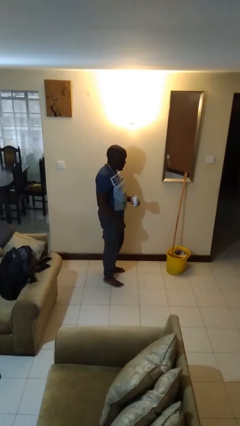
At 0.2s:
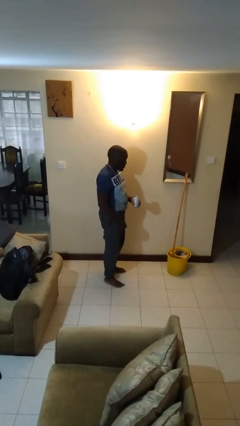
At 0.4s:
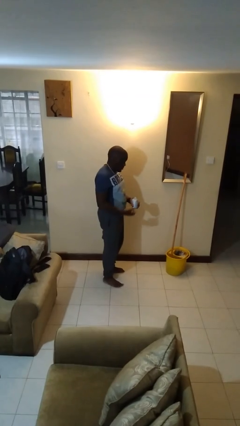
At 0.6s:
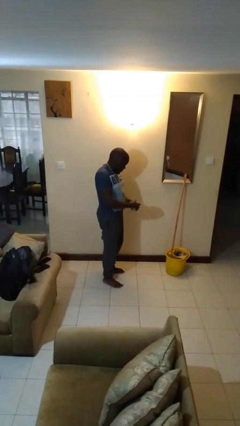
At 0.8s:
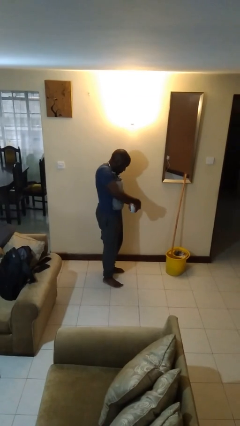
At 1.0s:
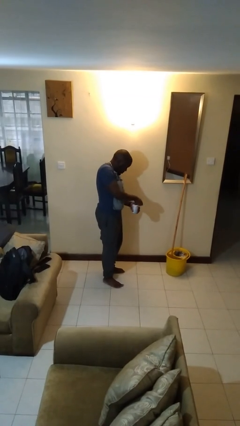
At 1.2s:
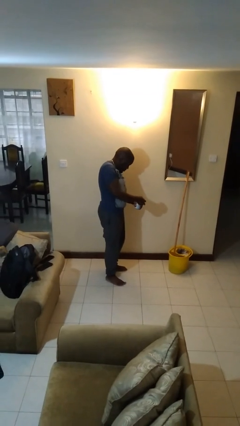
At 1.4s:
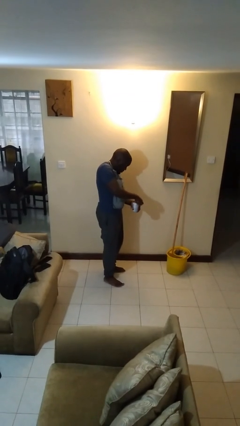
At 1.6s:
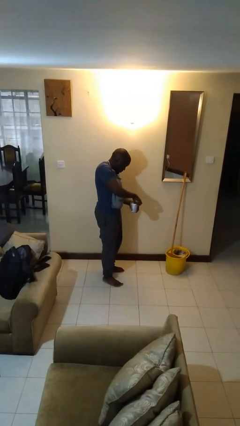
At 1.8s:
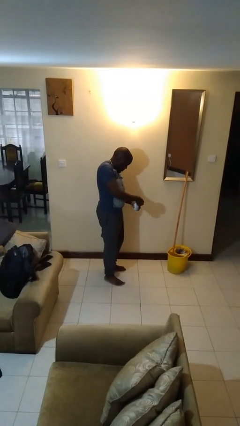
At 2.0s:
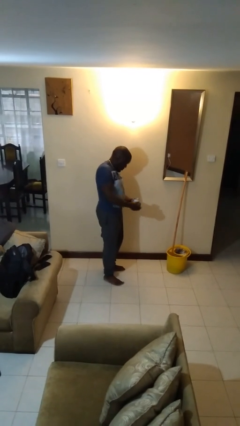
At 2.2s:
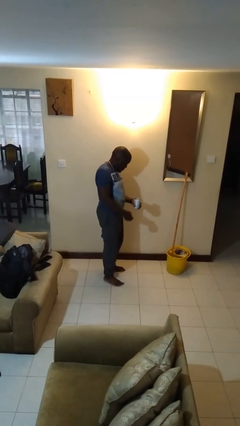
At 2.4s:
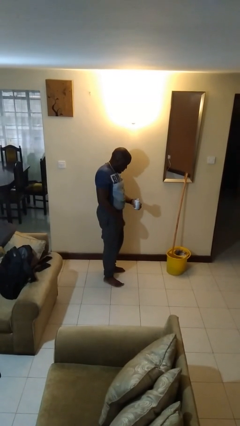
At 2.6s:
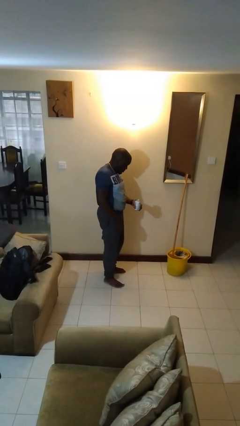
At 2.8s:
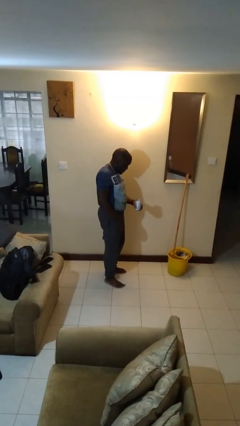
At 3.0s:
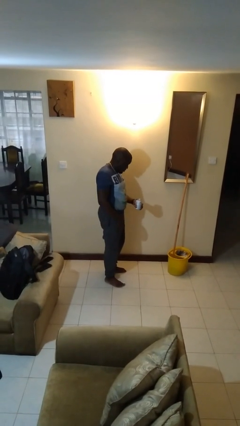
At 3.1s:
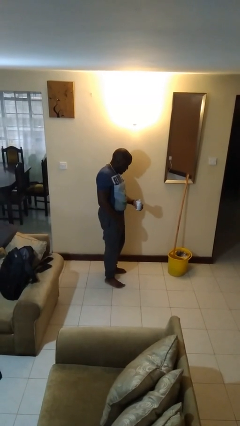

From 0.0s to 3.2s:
person opens beverage can

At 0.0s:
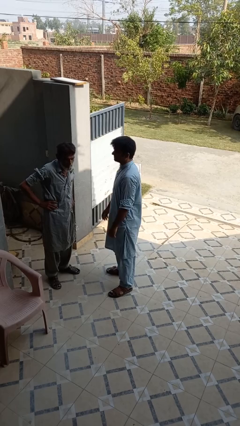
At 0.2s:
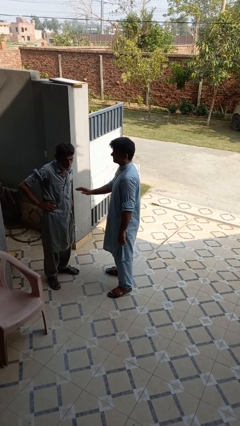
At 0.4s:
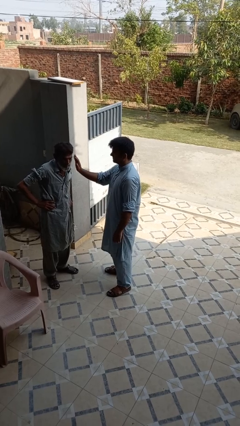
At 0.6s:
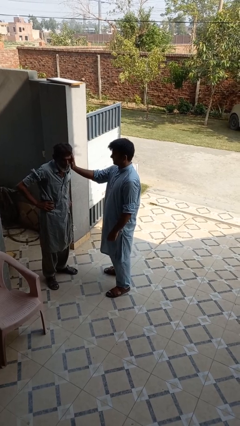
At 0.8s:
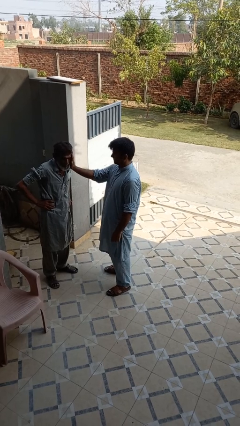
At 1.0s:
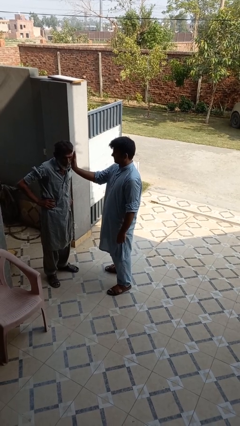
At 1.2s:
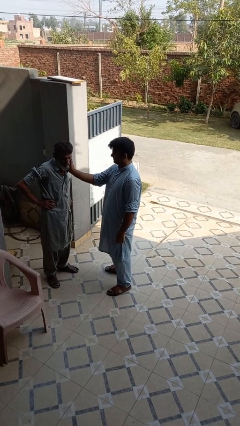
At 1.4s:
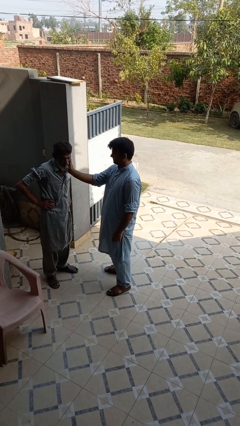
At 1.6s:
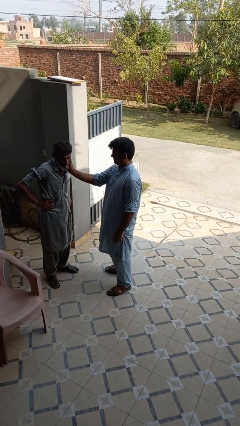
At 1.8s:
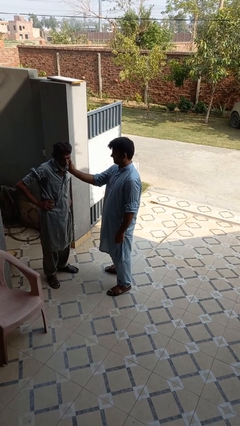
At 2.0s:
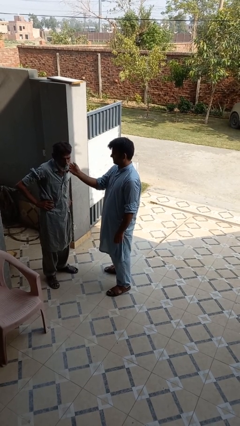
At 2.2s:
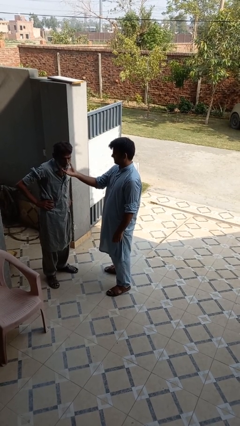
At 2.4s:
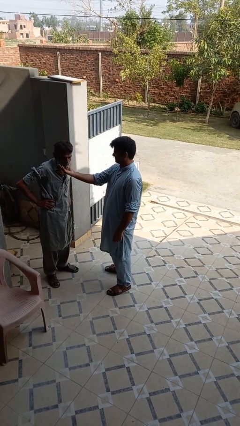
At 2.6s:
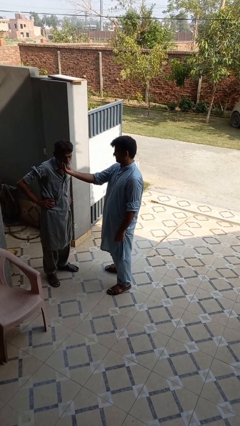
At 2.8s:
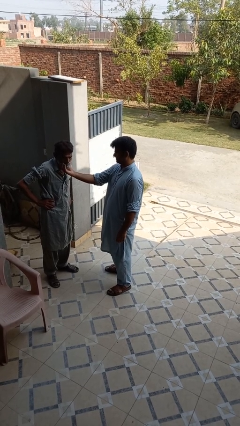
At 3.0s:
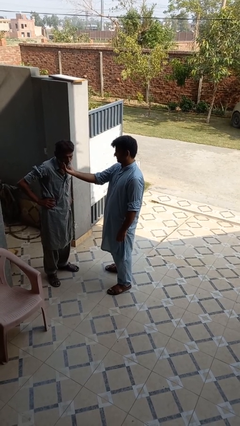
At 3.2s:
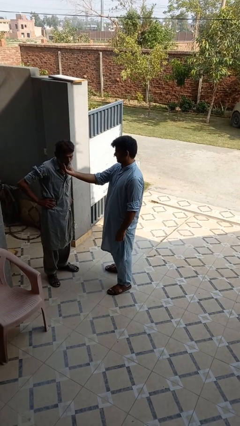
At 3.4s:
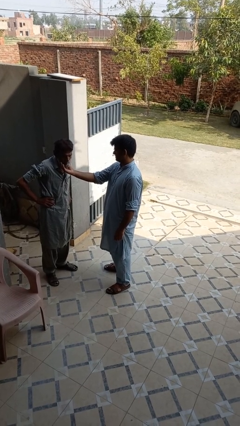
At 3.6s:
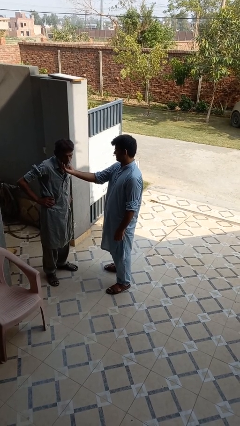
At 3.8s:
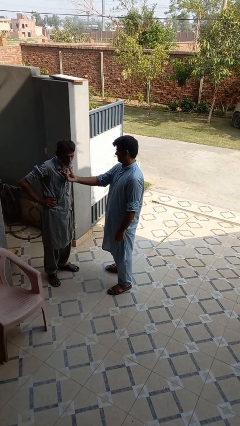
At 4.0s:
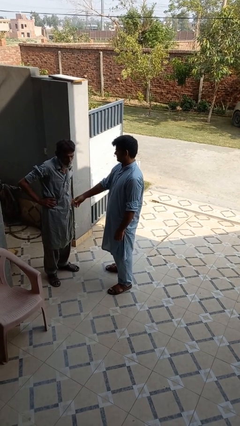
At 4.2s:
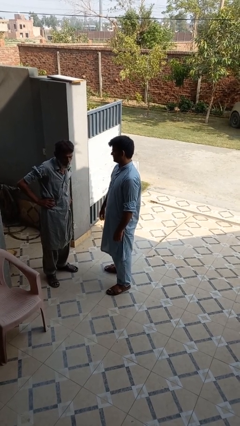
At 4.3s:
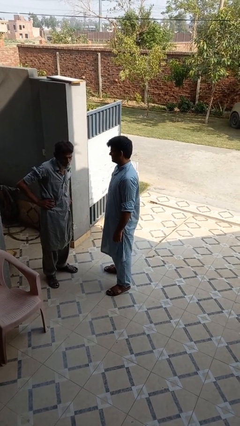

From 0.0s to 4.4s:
person touches face of person

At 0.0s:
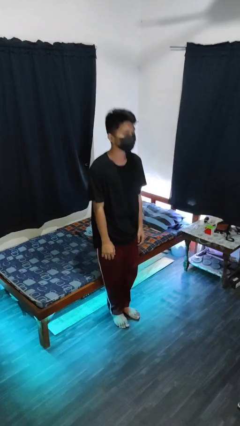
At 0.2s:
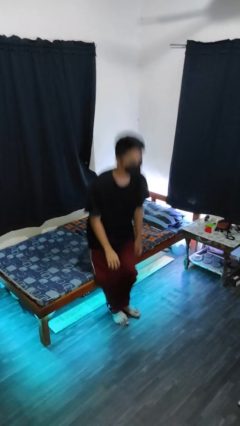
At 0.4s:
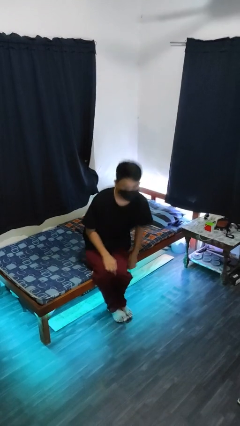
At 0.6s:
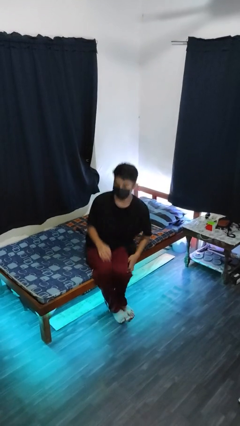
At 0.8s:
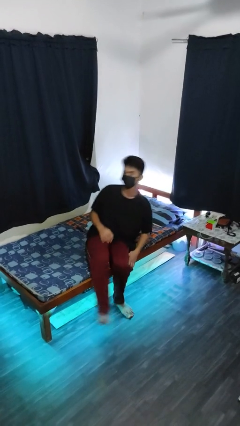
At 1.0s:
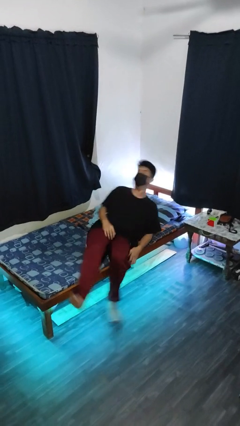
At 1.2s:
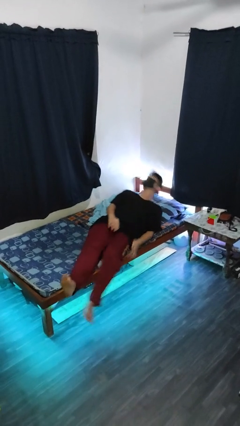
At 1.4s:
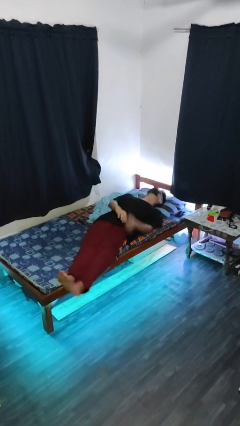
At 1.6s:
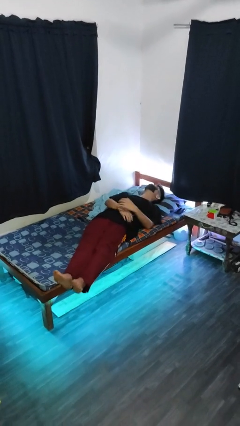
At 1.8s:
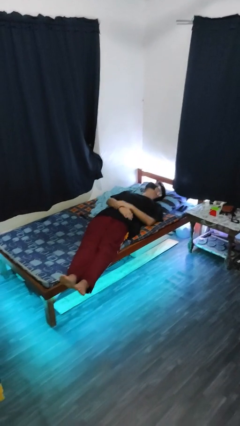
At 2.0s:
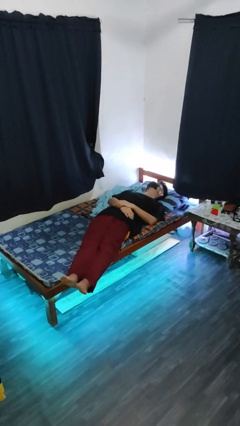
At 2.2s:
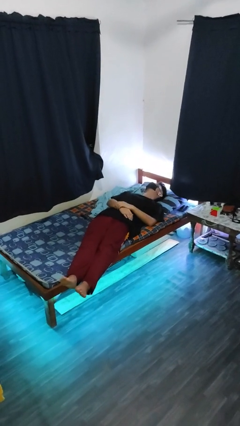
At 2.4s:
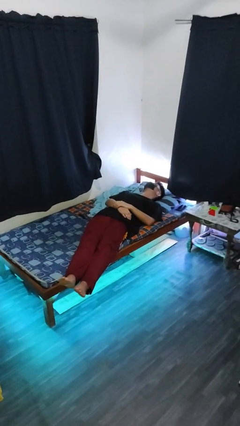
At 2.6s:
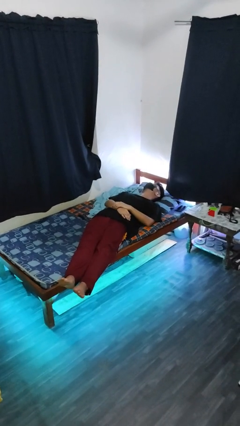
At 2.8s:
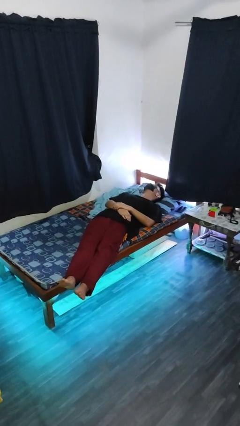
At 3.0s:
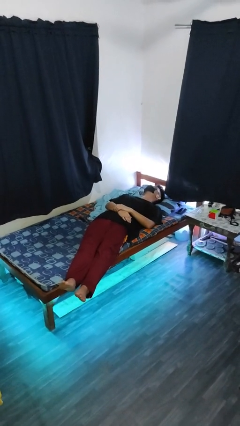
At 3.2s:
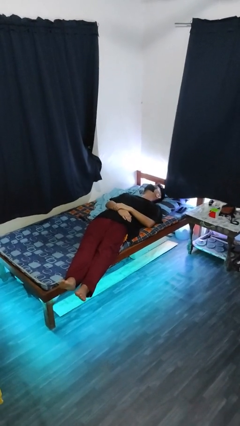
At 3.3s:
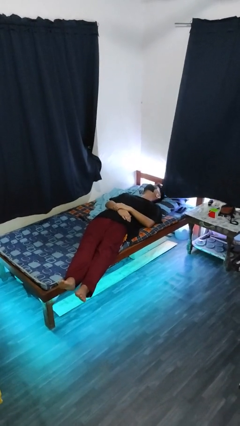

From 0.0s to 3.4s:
person lies down on bed

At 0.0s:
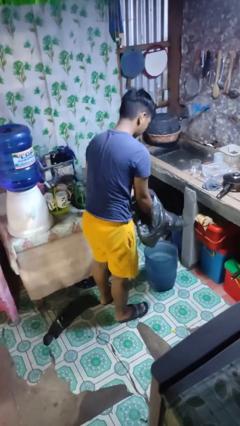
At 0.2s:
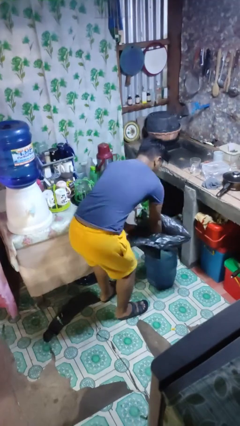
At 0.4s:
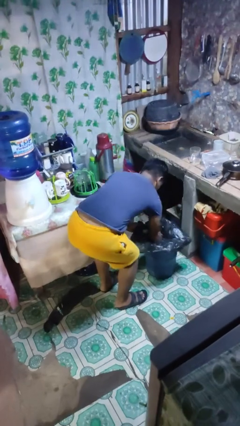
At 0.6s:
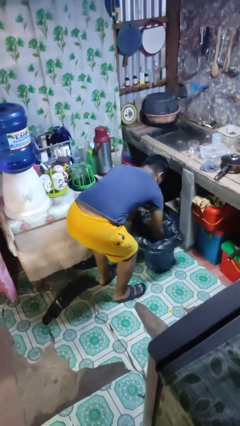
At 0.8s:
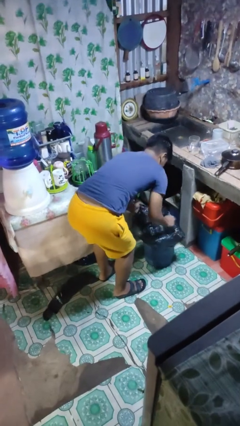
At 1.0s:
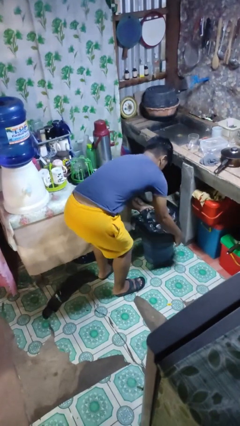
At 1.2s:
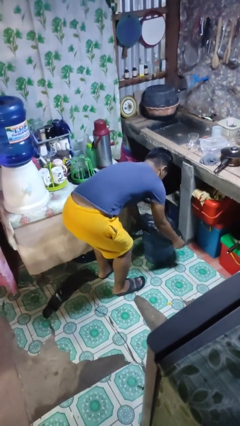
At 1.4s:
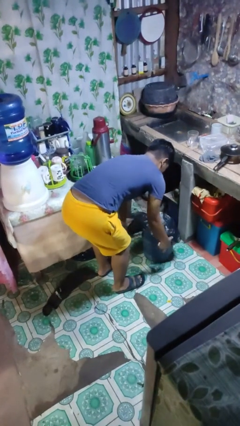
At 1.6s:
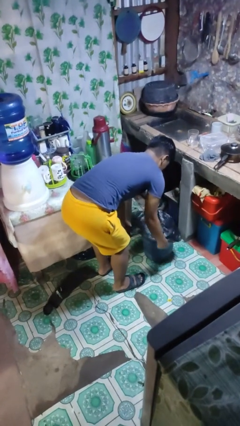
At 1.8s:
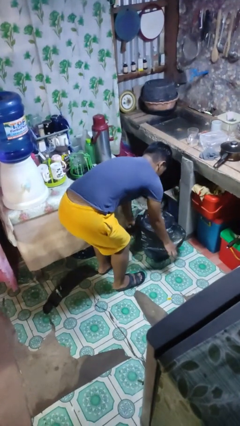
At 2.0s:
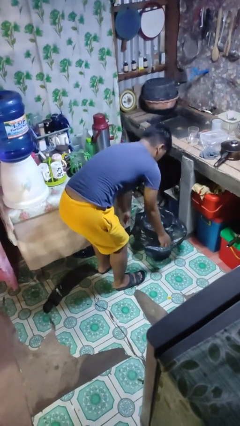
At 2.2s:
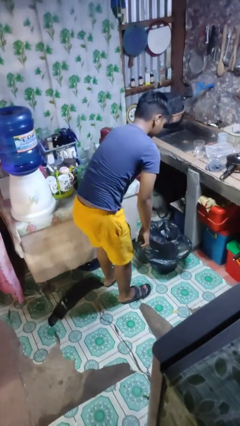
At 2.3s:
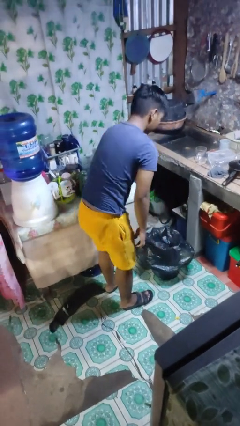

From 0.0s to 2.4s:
person inserts trashbag into trashcan

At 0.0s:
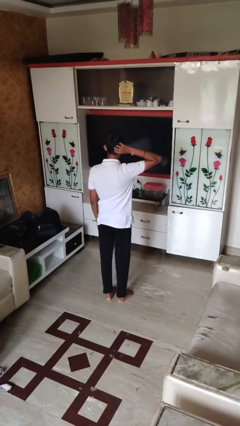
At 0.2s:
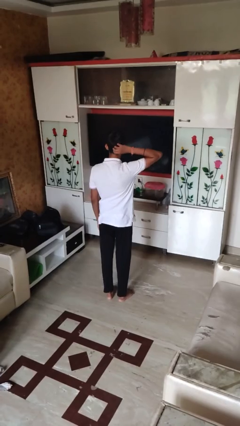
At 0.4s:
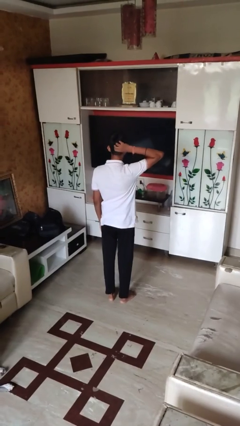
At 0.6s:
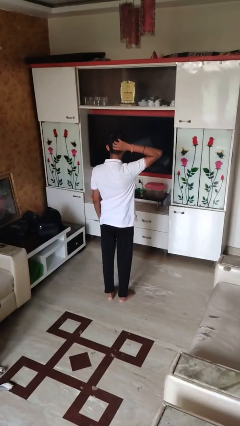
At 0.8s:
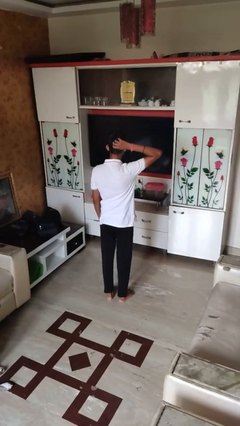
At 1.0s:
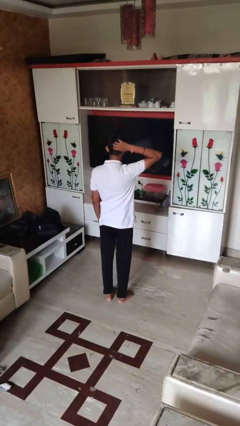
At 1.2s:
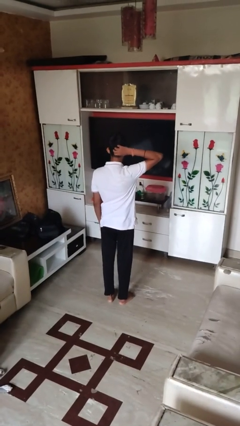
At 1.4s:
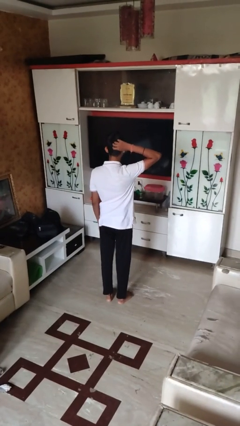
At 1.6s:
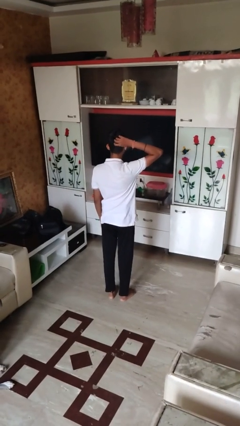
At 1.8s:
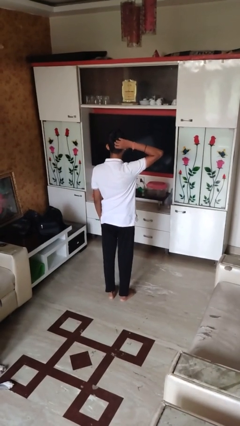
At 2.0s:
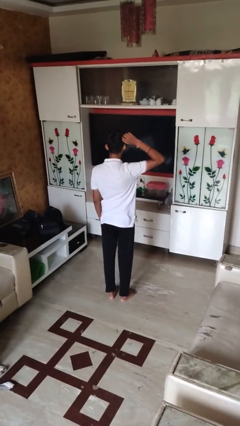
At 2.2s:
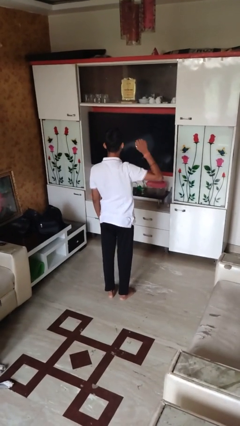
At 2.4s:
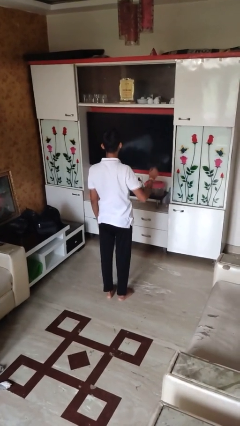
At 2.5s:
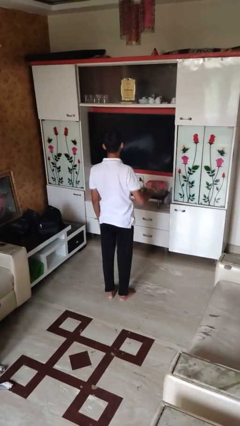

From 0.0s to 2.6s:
person scratches face

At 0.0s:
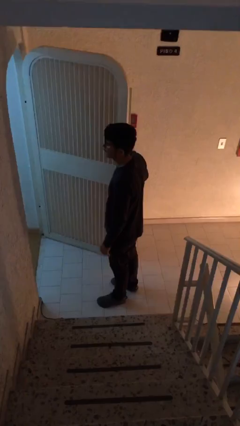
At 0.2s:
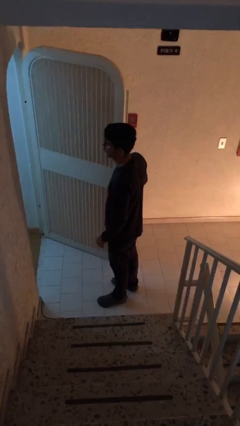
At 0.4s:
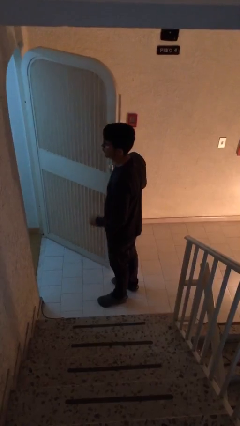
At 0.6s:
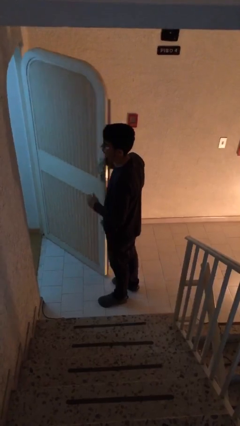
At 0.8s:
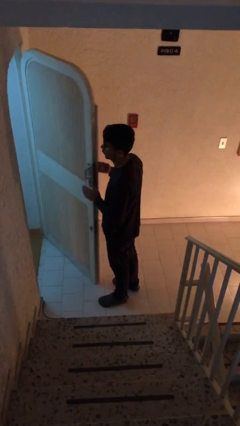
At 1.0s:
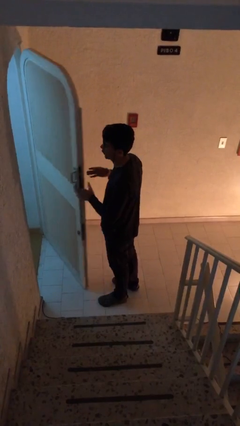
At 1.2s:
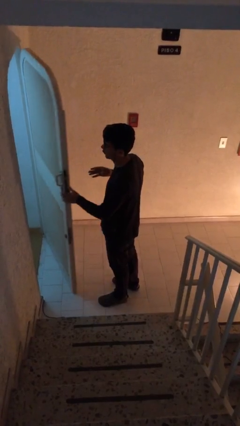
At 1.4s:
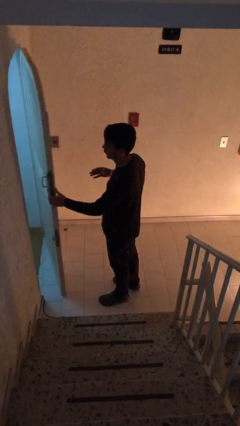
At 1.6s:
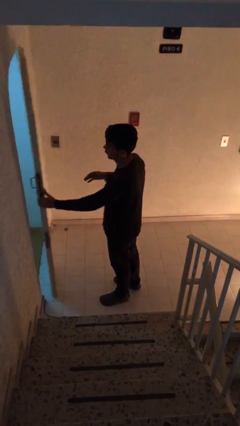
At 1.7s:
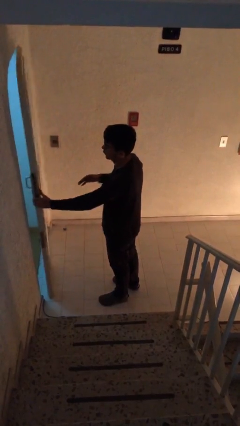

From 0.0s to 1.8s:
person closes facility door
